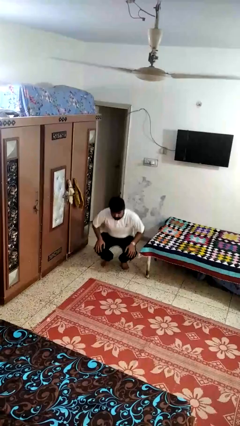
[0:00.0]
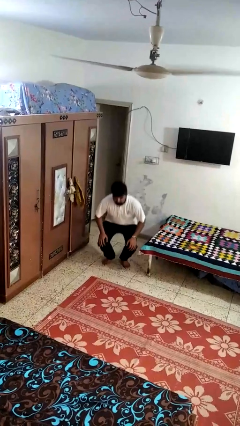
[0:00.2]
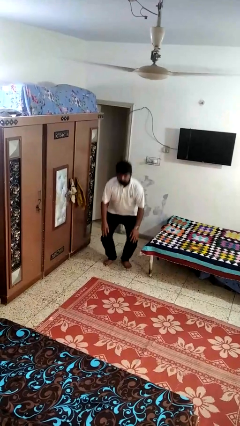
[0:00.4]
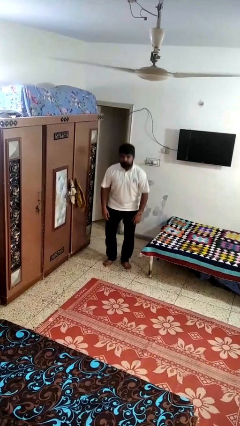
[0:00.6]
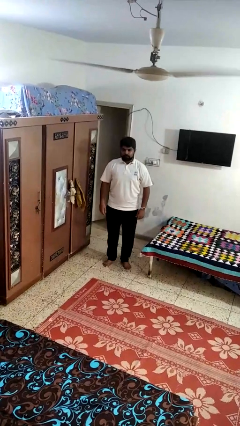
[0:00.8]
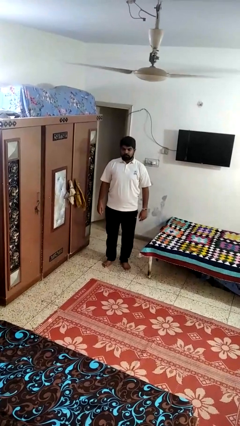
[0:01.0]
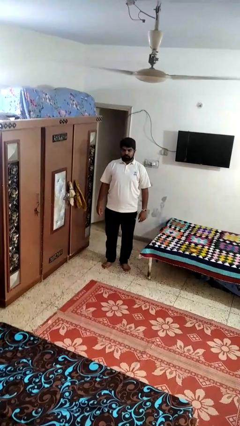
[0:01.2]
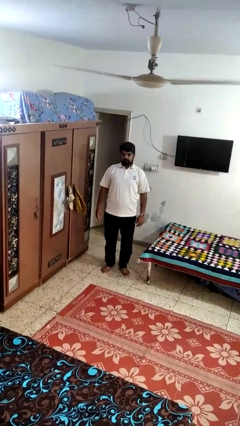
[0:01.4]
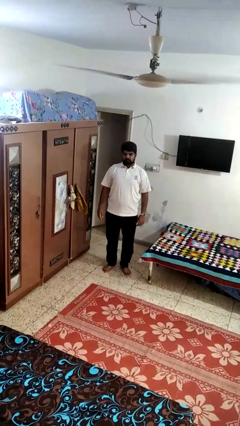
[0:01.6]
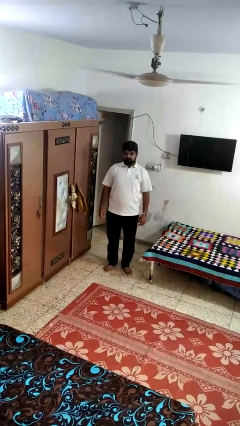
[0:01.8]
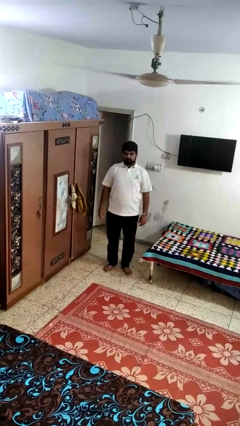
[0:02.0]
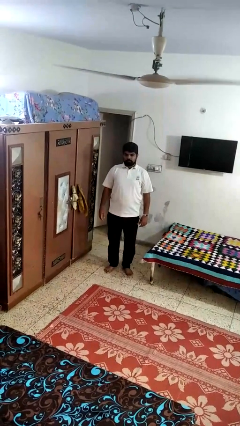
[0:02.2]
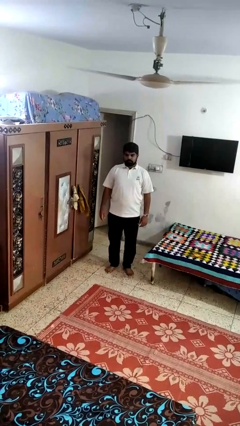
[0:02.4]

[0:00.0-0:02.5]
person stands up

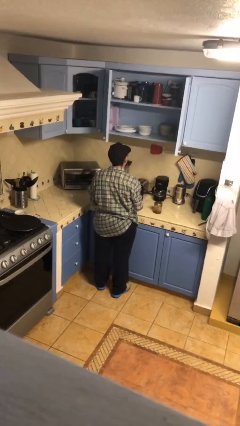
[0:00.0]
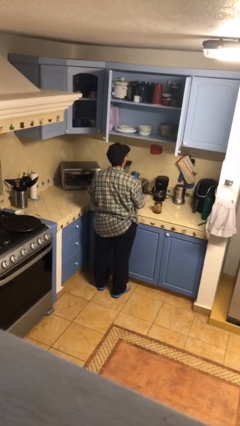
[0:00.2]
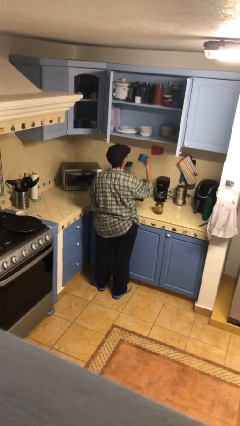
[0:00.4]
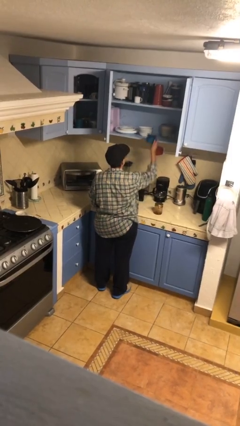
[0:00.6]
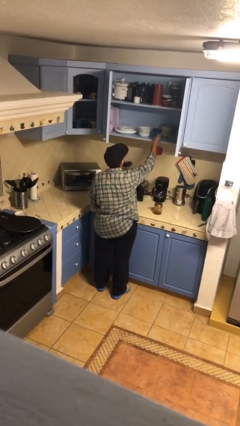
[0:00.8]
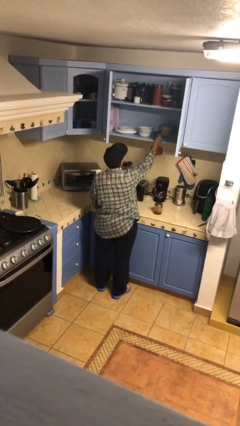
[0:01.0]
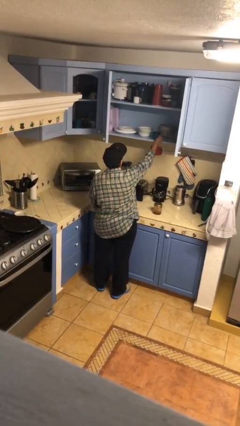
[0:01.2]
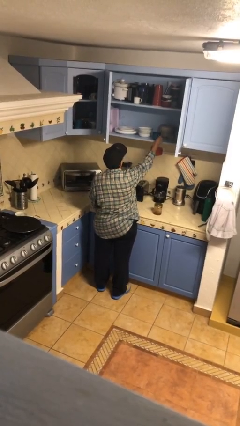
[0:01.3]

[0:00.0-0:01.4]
person puts down object into cabinet

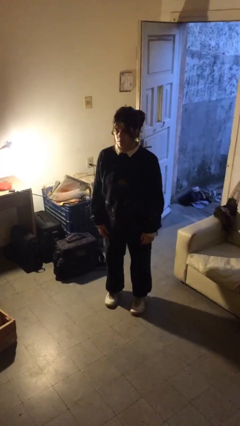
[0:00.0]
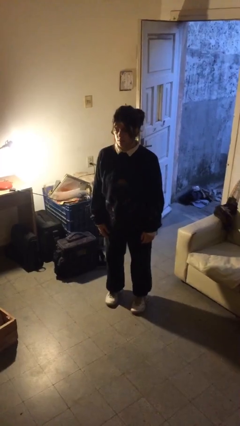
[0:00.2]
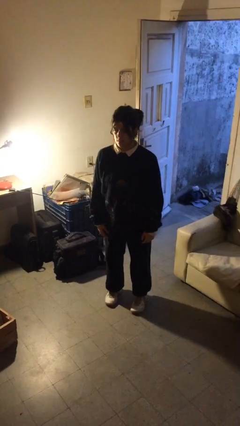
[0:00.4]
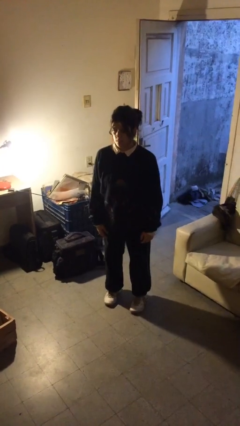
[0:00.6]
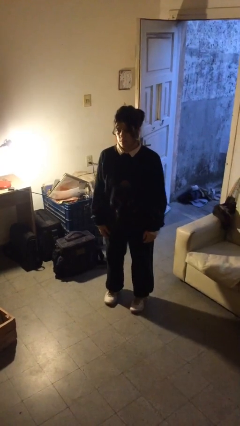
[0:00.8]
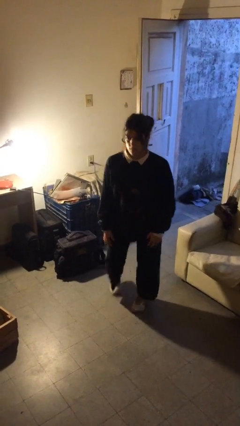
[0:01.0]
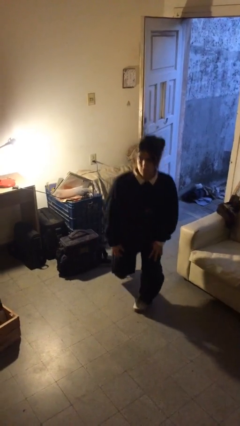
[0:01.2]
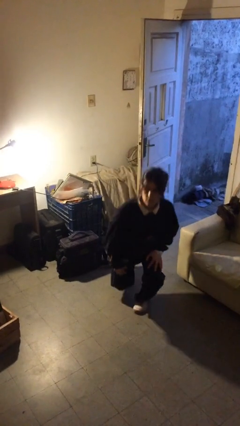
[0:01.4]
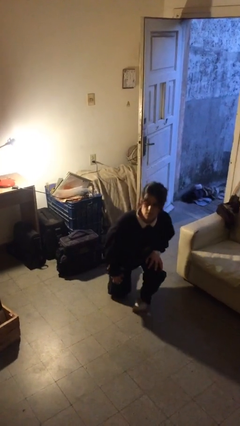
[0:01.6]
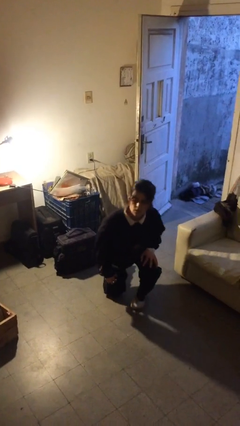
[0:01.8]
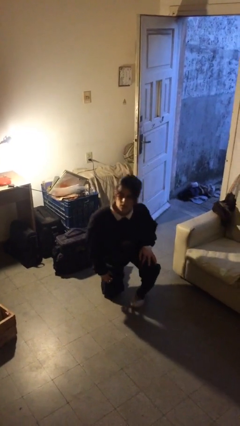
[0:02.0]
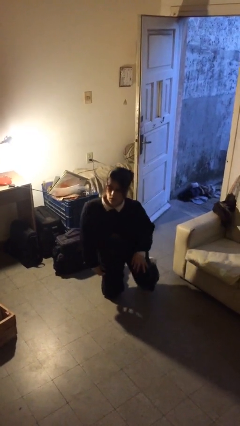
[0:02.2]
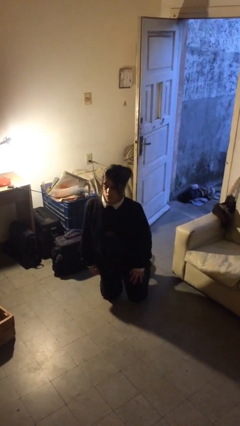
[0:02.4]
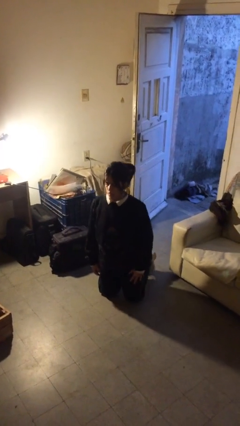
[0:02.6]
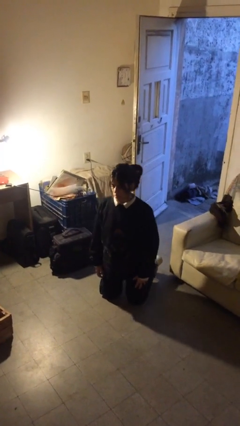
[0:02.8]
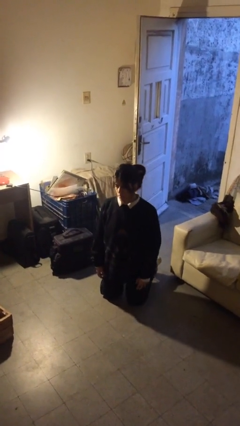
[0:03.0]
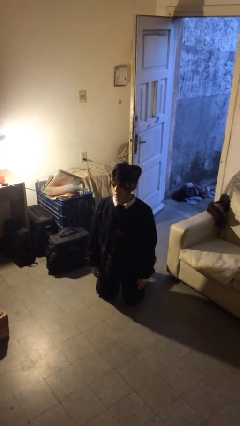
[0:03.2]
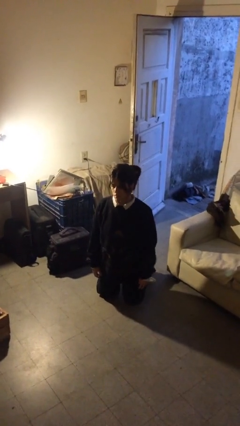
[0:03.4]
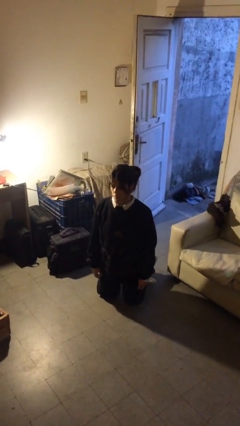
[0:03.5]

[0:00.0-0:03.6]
person kneels

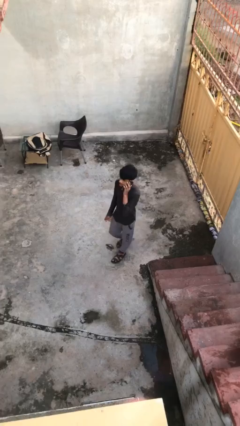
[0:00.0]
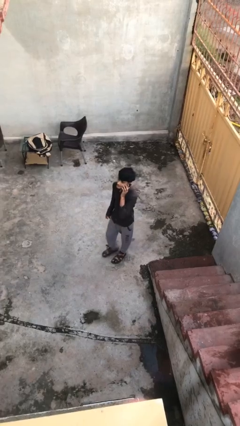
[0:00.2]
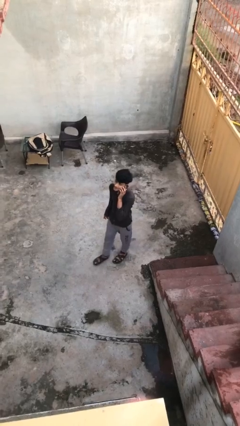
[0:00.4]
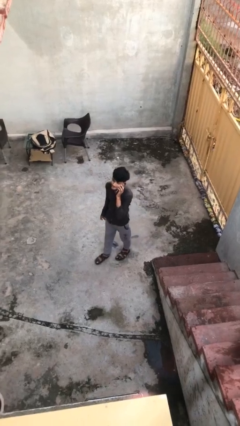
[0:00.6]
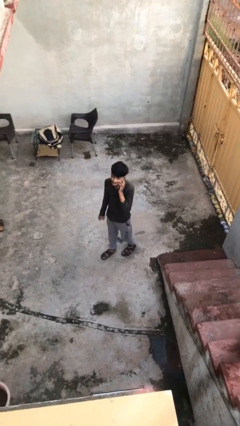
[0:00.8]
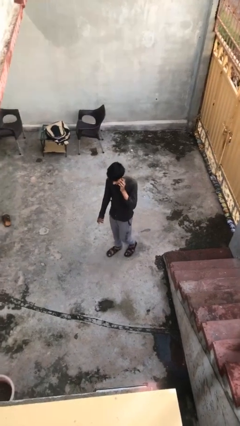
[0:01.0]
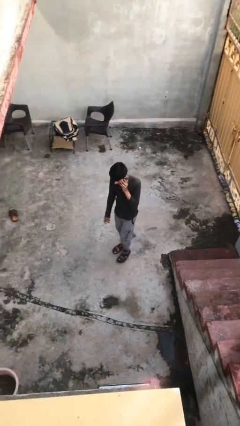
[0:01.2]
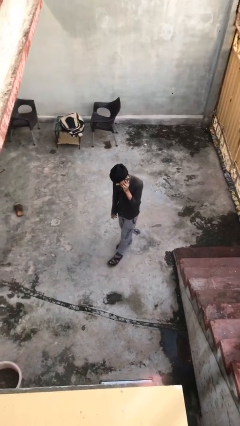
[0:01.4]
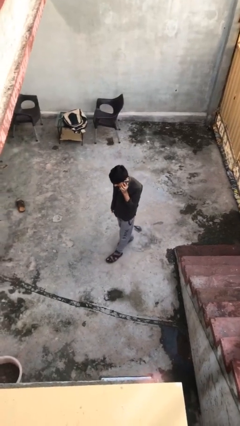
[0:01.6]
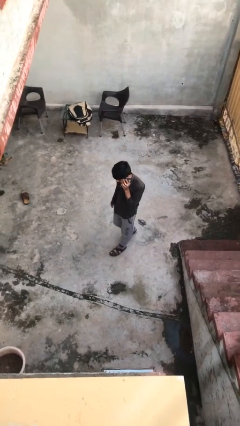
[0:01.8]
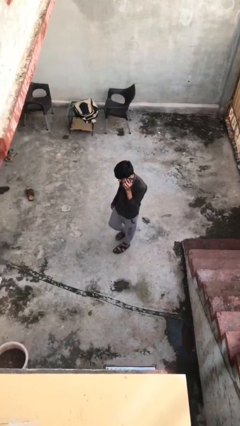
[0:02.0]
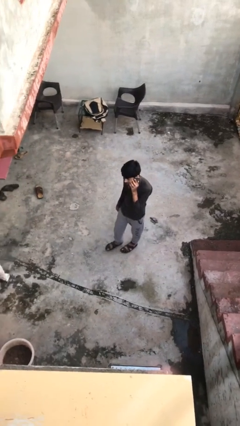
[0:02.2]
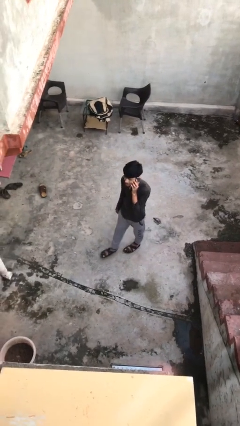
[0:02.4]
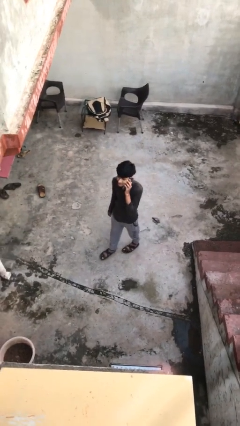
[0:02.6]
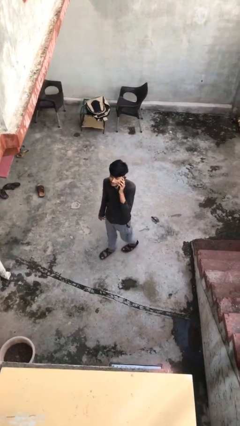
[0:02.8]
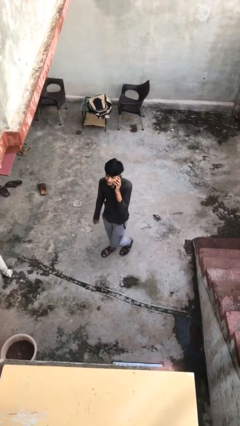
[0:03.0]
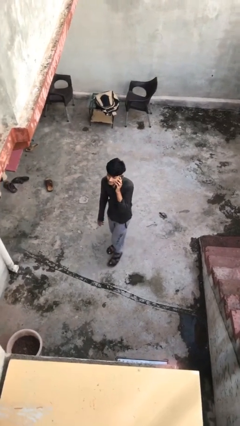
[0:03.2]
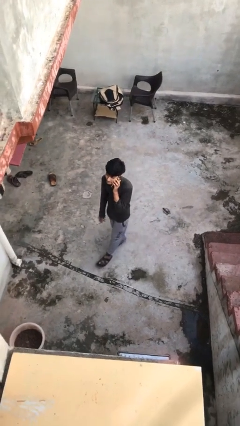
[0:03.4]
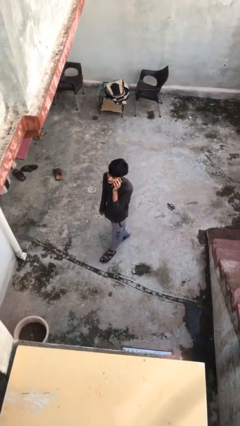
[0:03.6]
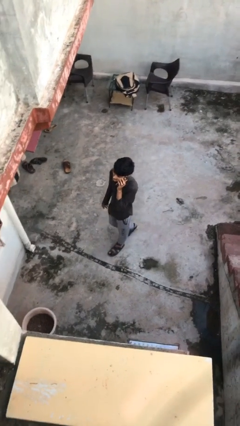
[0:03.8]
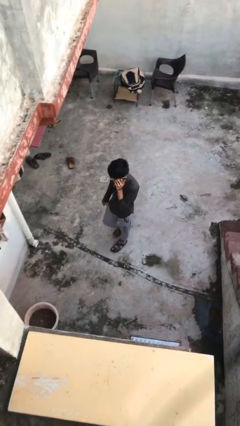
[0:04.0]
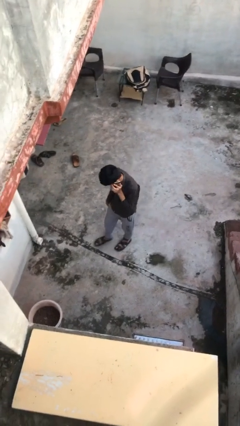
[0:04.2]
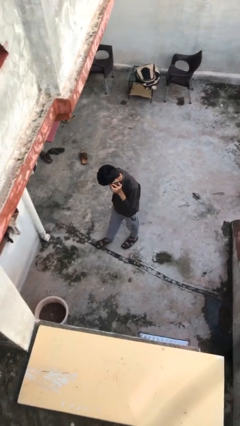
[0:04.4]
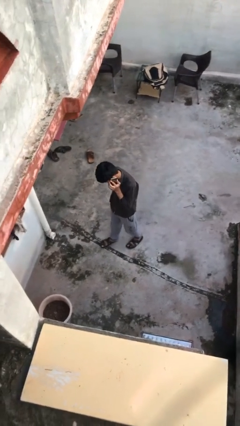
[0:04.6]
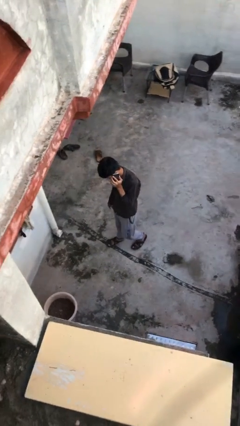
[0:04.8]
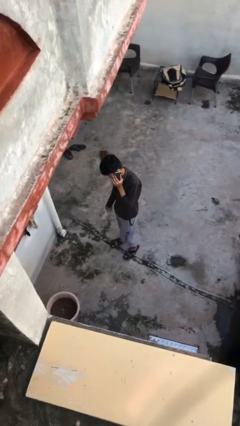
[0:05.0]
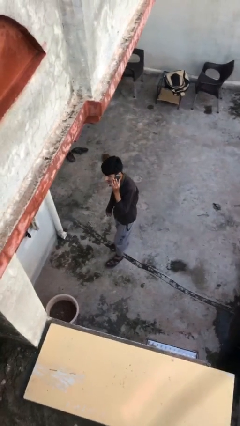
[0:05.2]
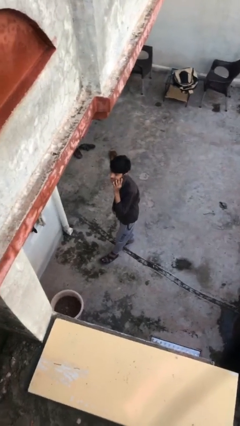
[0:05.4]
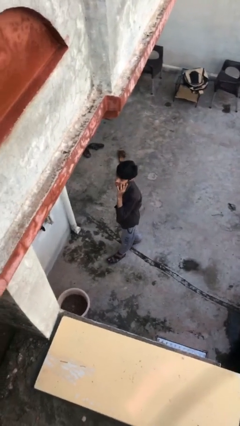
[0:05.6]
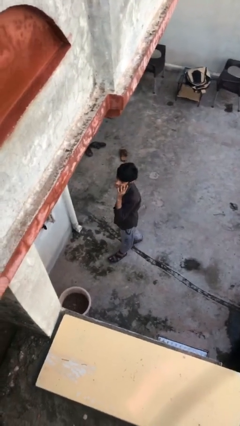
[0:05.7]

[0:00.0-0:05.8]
person talks on phone

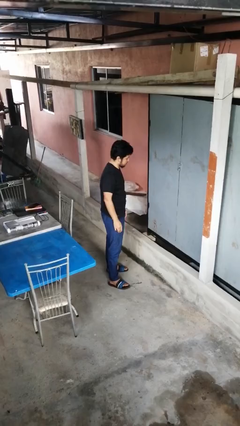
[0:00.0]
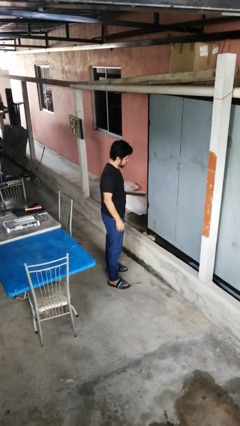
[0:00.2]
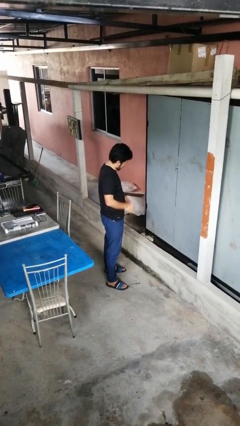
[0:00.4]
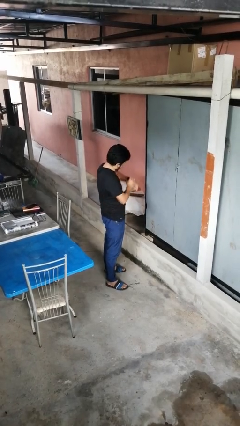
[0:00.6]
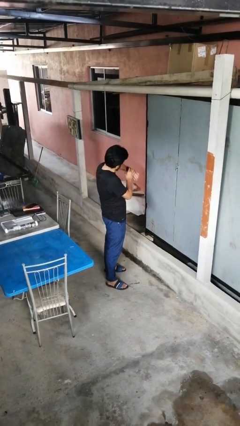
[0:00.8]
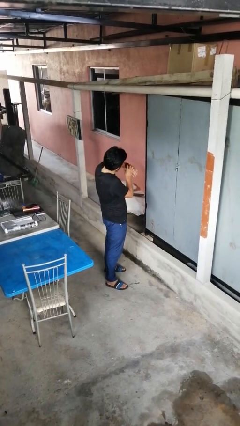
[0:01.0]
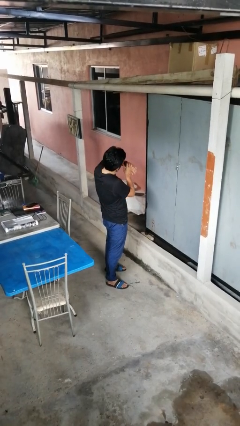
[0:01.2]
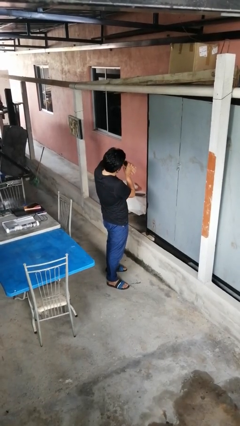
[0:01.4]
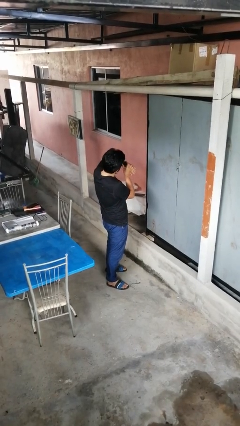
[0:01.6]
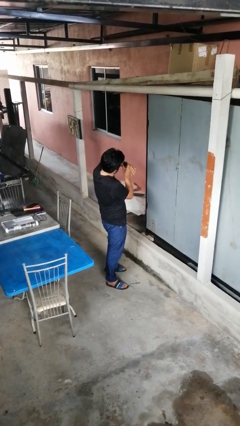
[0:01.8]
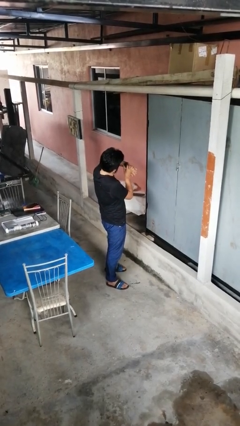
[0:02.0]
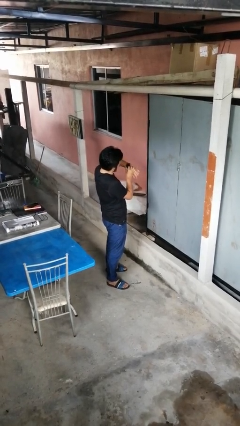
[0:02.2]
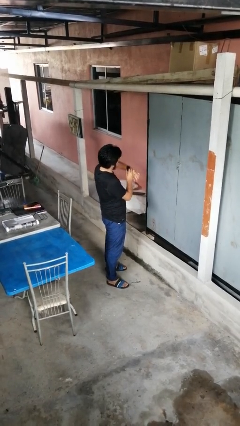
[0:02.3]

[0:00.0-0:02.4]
person looks at wristwatch

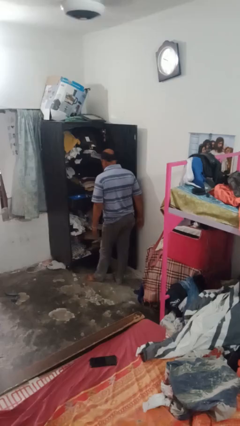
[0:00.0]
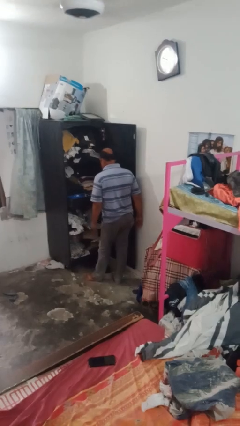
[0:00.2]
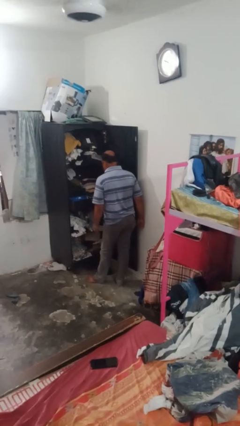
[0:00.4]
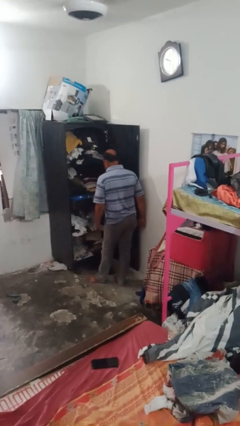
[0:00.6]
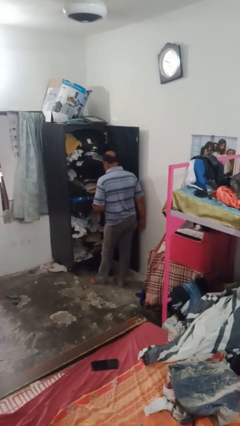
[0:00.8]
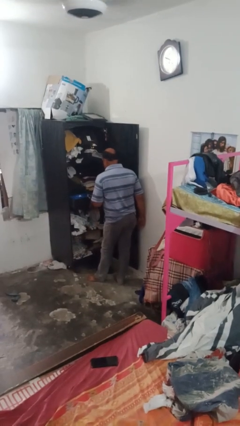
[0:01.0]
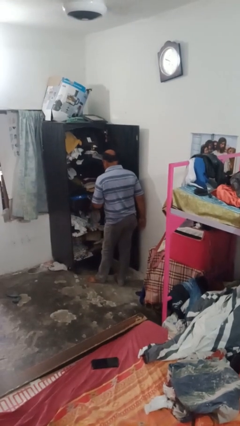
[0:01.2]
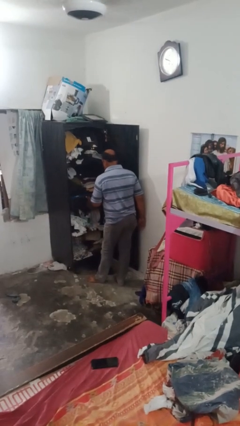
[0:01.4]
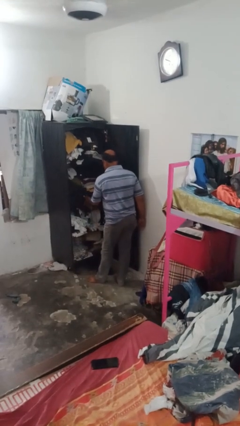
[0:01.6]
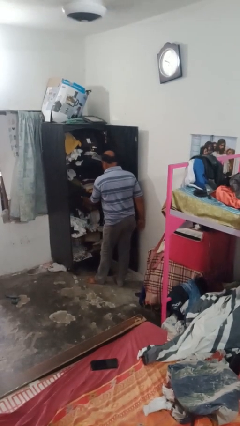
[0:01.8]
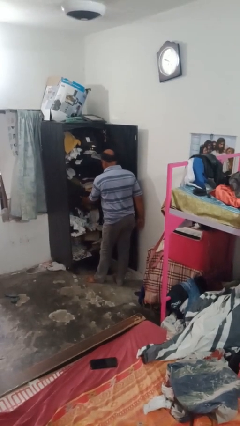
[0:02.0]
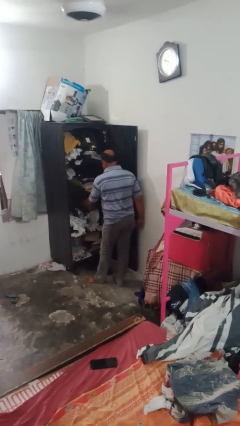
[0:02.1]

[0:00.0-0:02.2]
person closes dresser drawer
